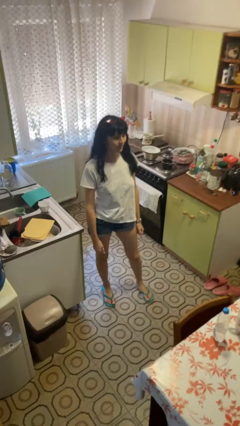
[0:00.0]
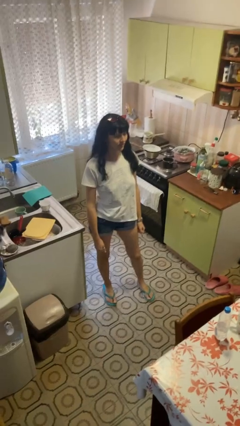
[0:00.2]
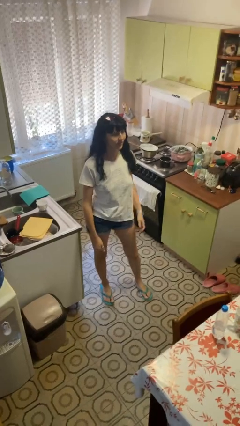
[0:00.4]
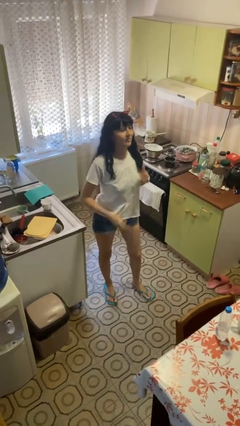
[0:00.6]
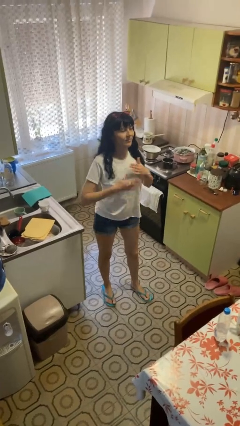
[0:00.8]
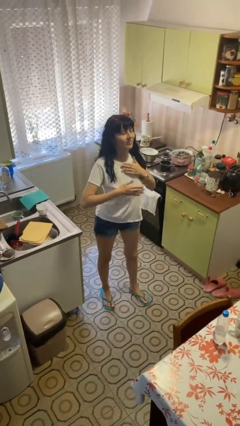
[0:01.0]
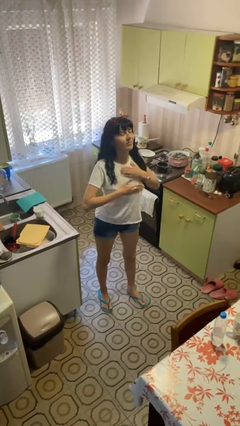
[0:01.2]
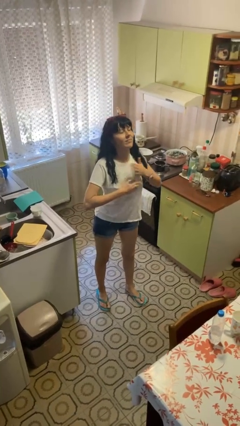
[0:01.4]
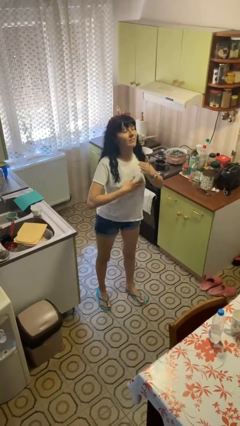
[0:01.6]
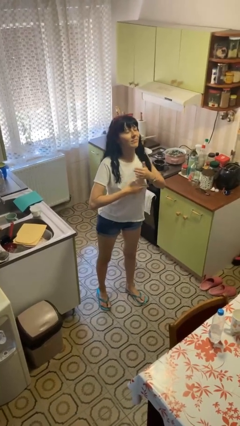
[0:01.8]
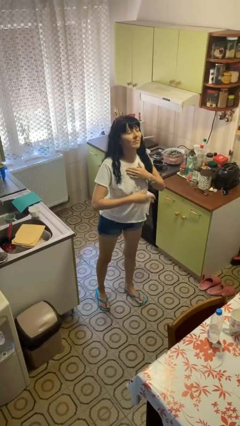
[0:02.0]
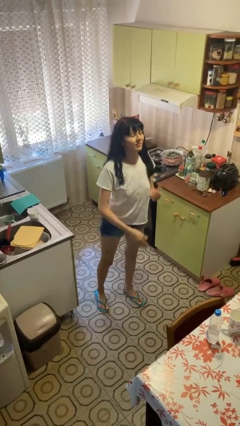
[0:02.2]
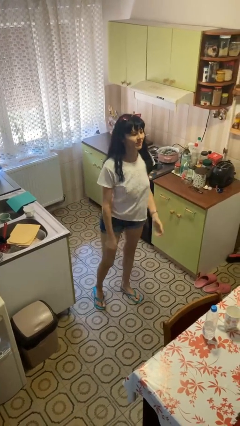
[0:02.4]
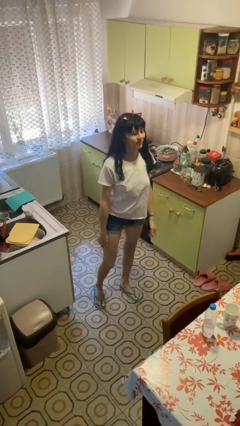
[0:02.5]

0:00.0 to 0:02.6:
person drums on chest

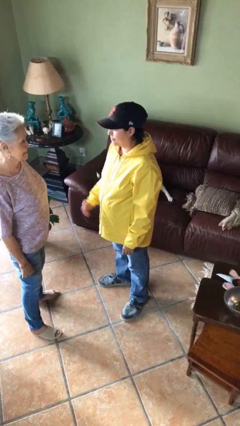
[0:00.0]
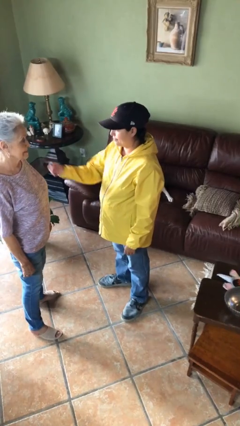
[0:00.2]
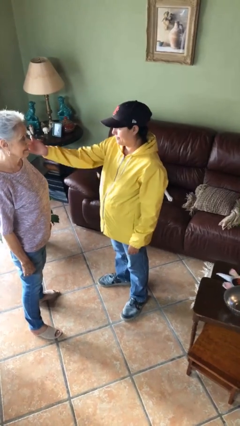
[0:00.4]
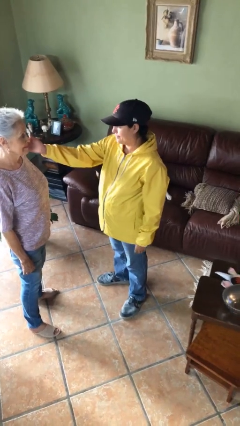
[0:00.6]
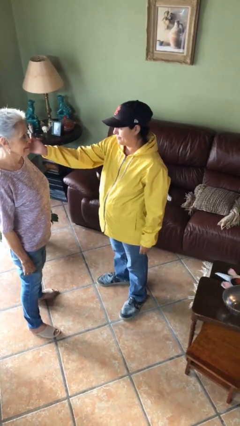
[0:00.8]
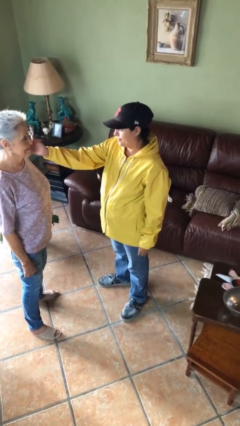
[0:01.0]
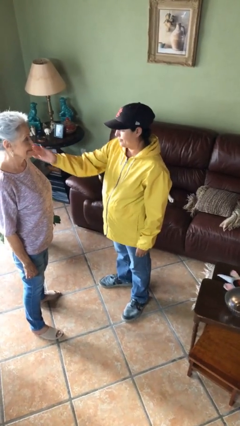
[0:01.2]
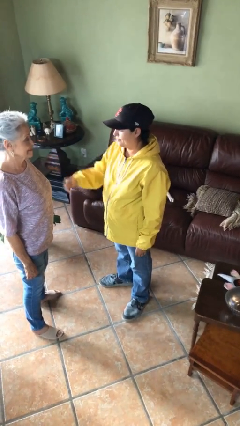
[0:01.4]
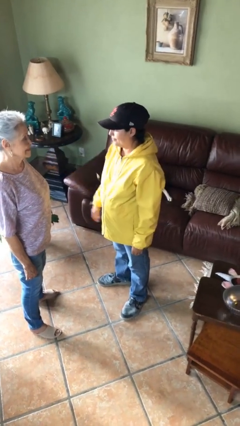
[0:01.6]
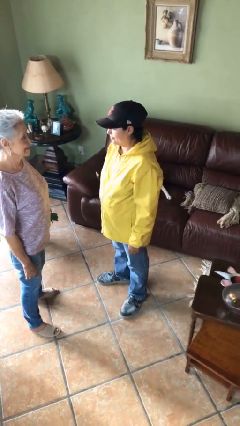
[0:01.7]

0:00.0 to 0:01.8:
person touches face of person

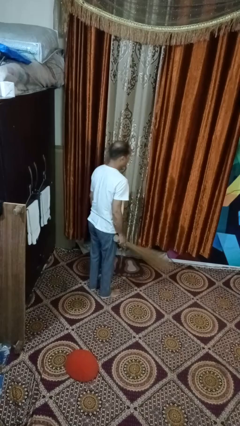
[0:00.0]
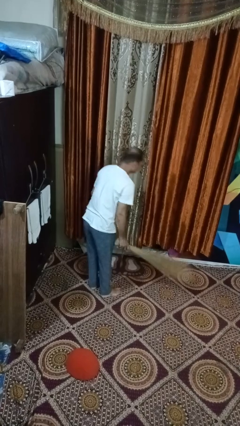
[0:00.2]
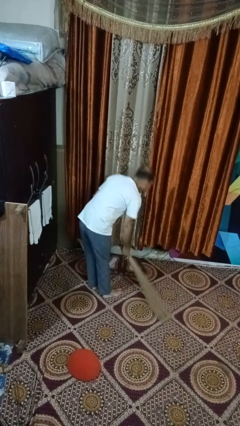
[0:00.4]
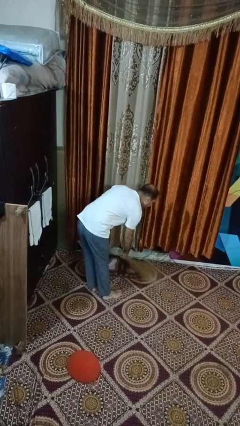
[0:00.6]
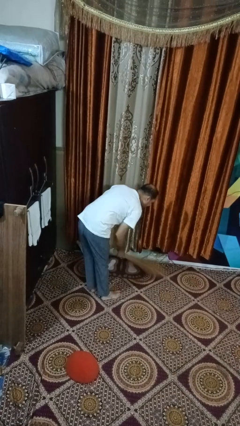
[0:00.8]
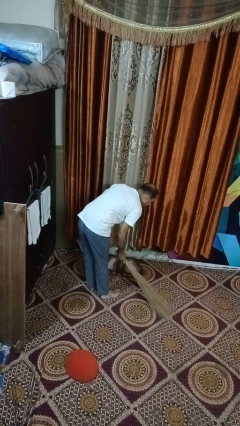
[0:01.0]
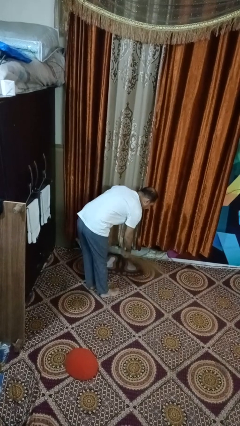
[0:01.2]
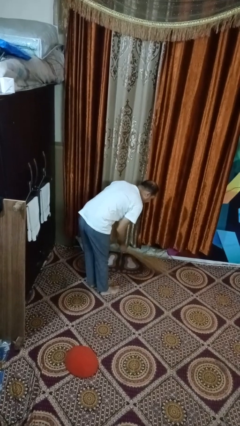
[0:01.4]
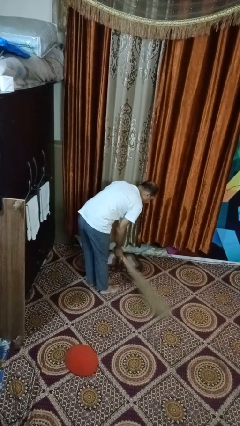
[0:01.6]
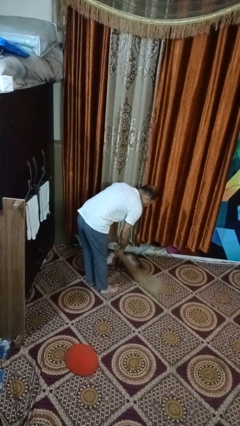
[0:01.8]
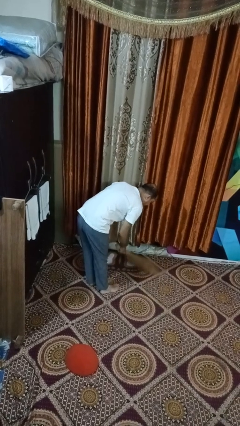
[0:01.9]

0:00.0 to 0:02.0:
person sweeps floor

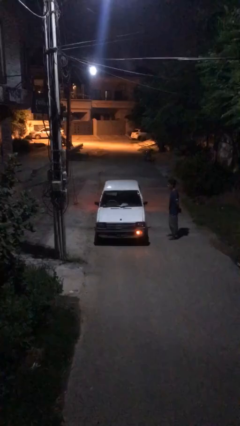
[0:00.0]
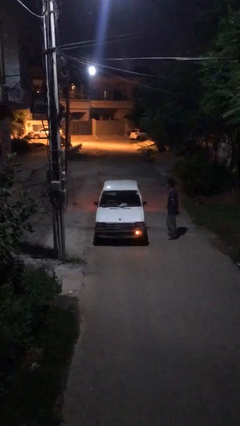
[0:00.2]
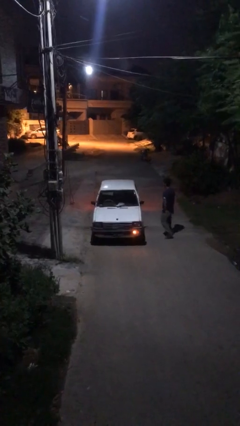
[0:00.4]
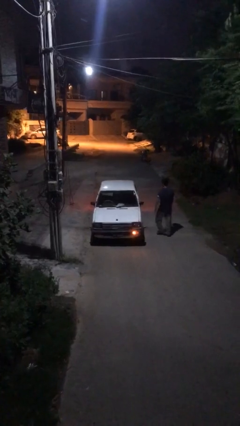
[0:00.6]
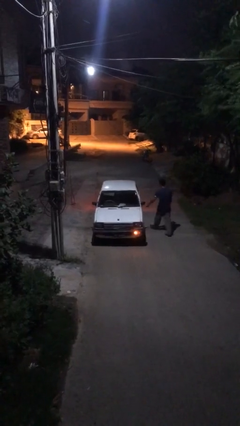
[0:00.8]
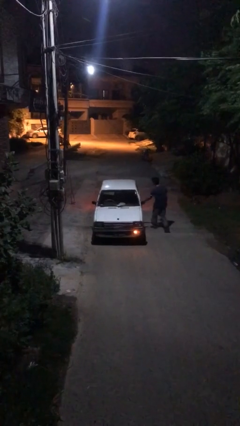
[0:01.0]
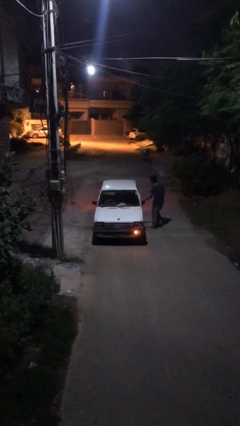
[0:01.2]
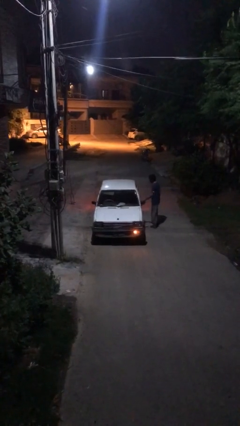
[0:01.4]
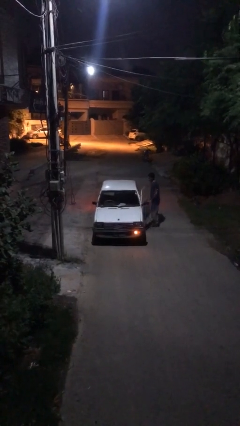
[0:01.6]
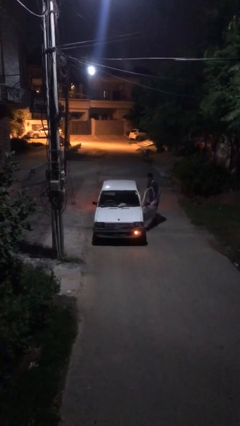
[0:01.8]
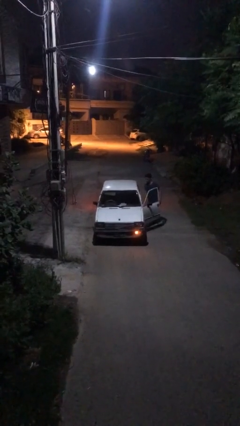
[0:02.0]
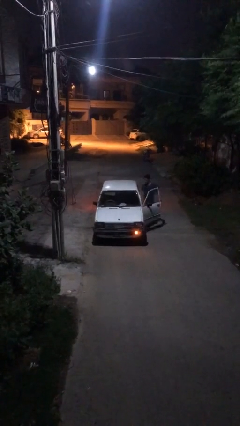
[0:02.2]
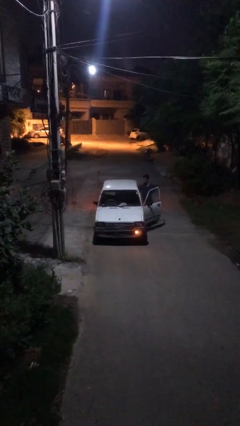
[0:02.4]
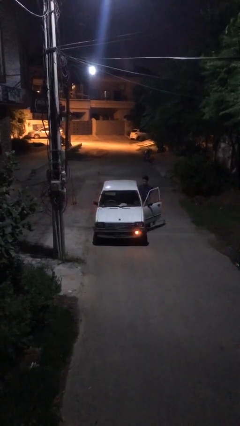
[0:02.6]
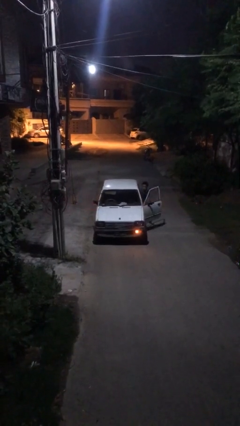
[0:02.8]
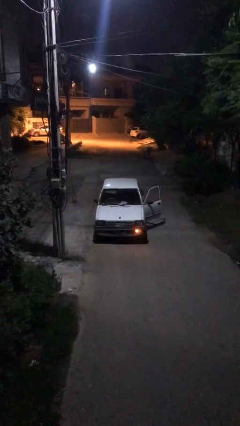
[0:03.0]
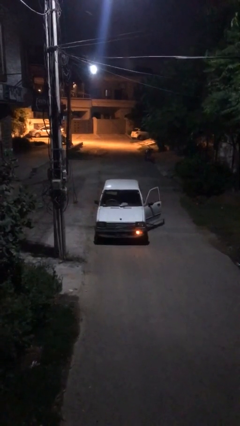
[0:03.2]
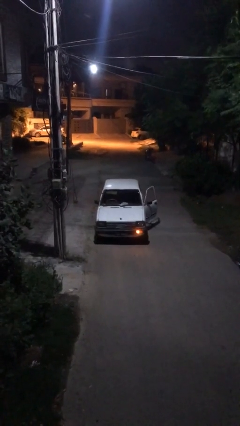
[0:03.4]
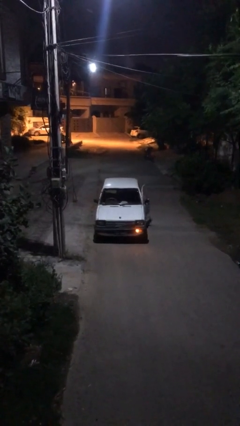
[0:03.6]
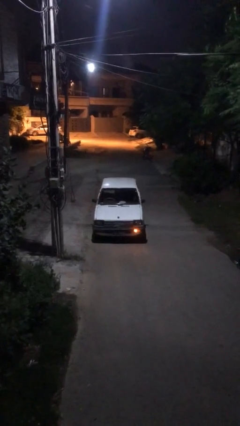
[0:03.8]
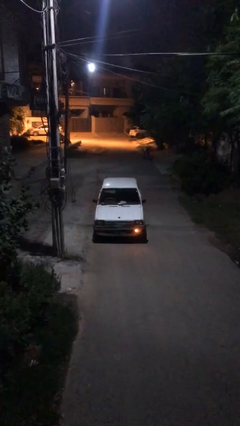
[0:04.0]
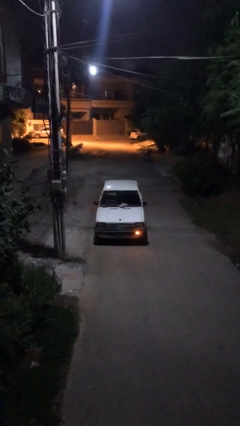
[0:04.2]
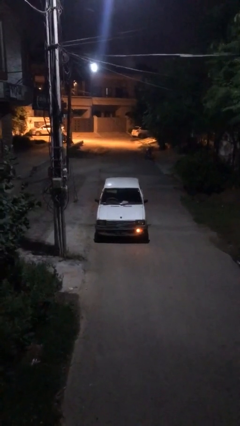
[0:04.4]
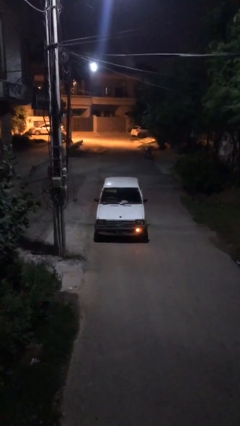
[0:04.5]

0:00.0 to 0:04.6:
car picks up person

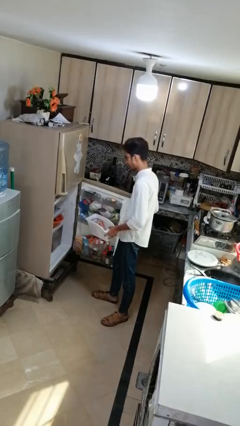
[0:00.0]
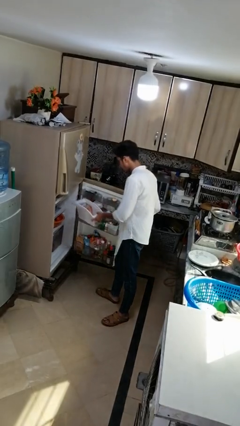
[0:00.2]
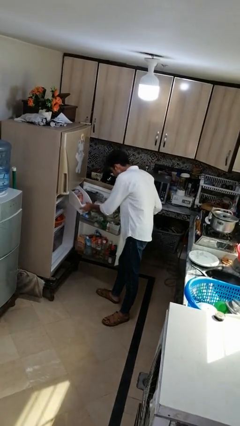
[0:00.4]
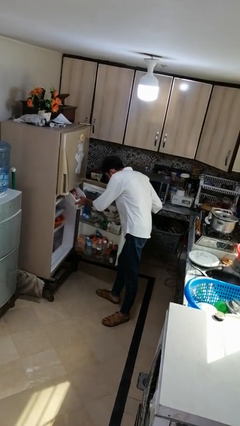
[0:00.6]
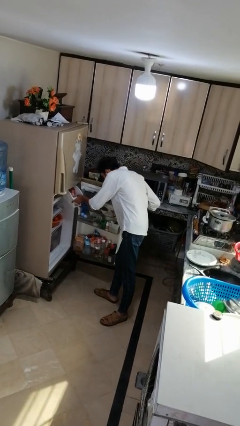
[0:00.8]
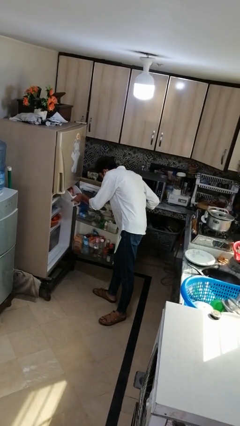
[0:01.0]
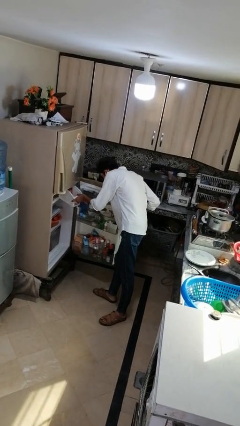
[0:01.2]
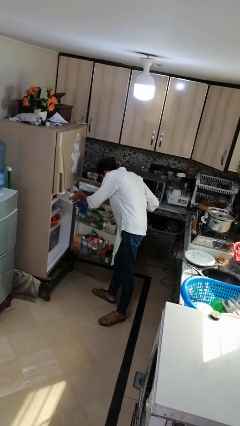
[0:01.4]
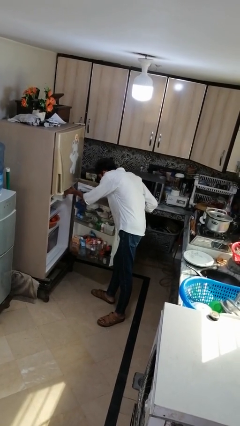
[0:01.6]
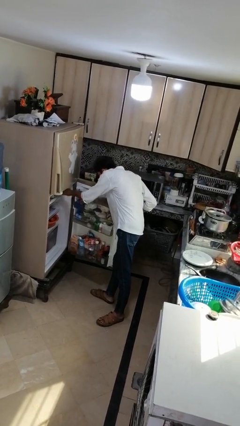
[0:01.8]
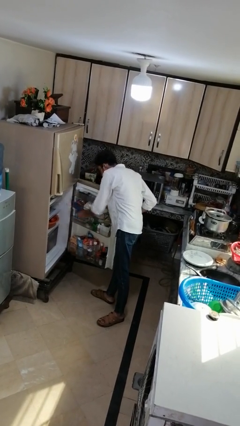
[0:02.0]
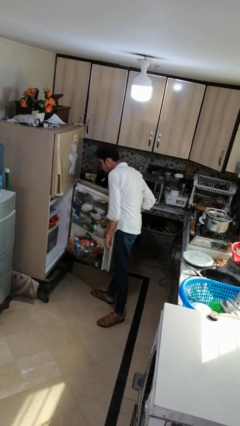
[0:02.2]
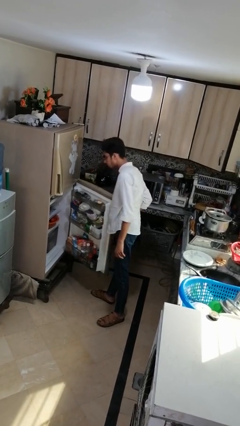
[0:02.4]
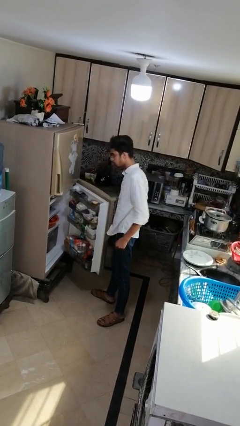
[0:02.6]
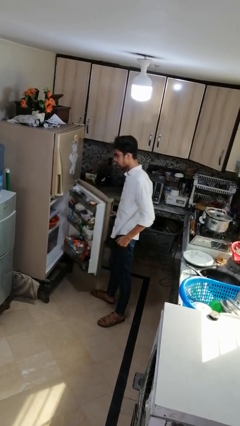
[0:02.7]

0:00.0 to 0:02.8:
person puts object into refrigerator

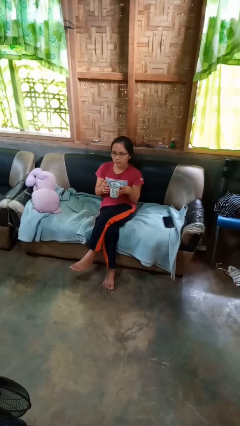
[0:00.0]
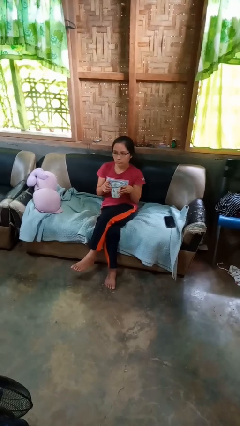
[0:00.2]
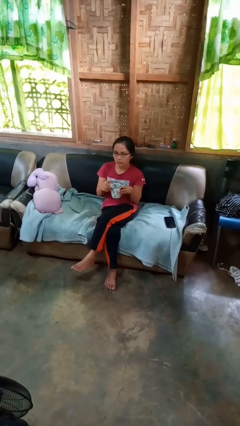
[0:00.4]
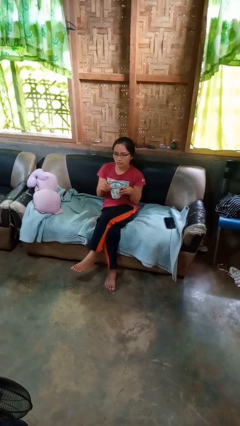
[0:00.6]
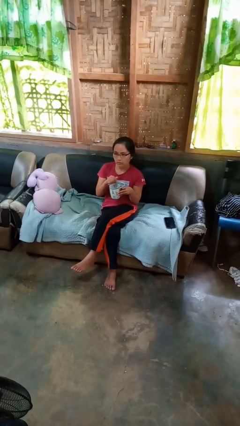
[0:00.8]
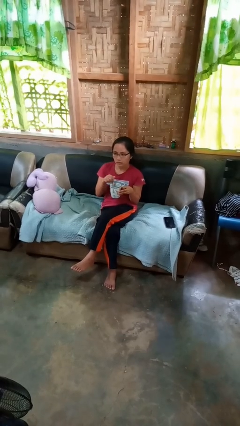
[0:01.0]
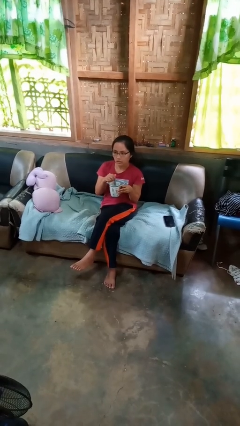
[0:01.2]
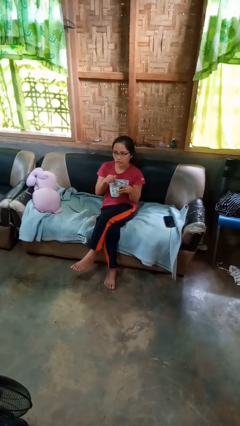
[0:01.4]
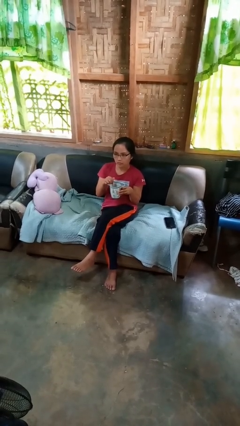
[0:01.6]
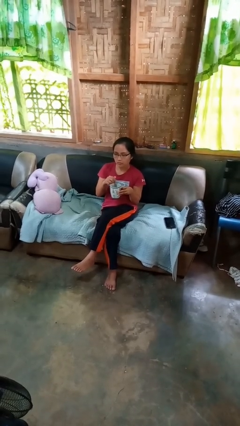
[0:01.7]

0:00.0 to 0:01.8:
person stirs mug

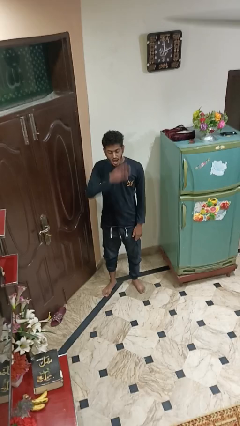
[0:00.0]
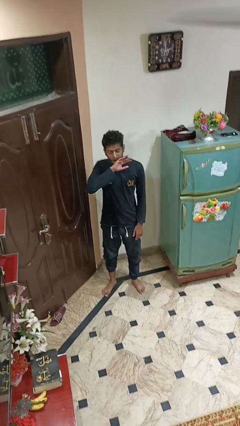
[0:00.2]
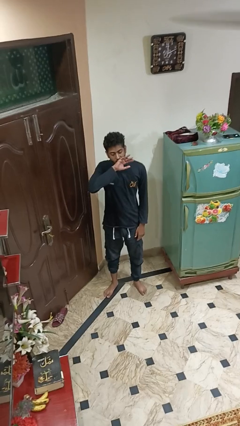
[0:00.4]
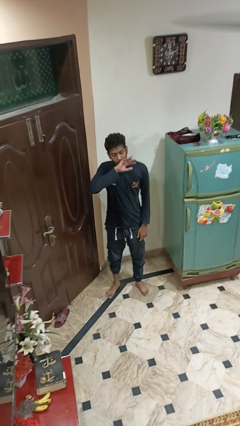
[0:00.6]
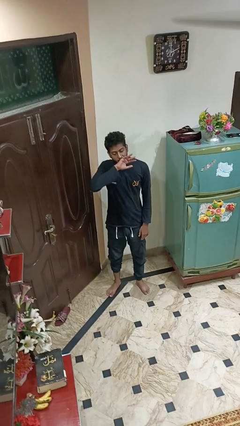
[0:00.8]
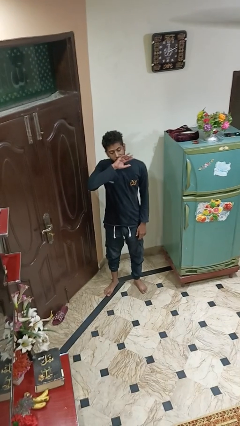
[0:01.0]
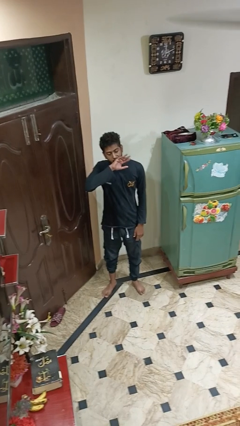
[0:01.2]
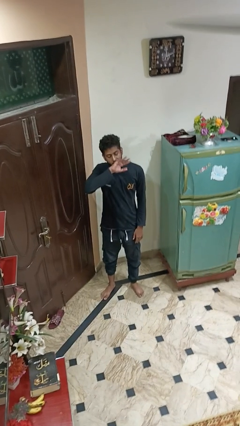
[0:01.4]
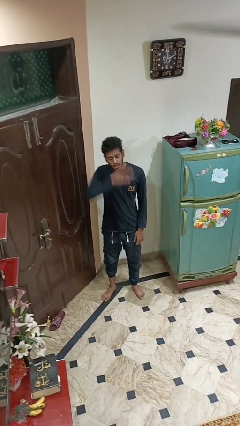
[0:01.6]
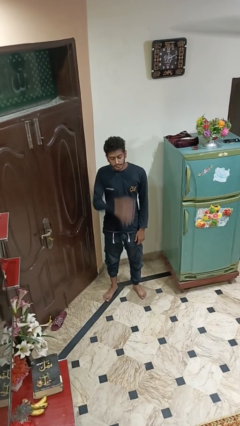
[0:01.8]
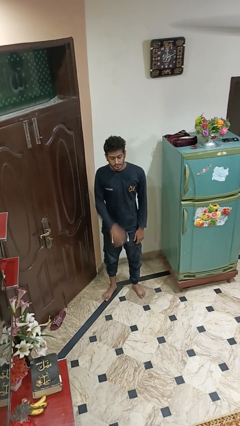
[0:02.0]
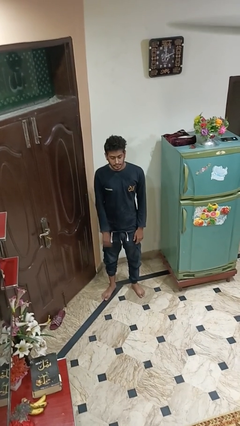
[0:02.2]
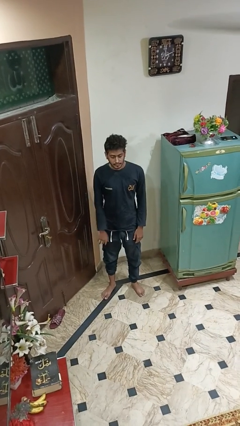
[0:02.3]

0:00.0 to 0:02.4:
person yawns
